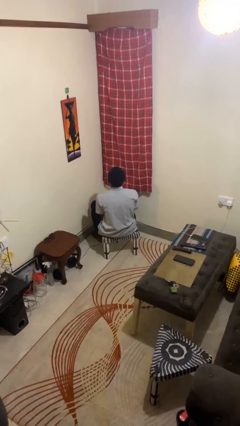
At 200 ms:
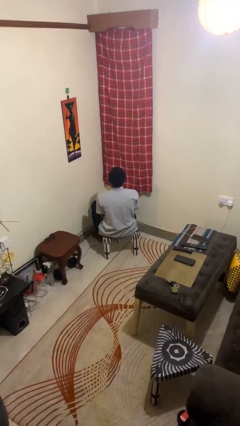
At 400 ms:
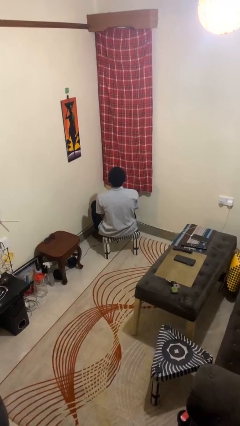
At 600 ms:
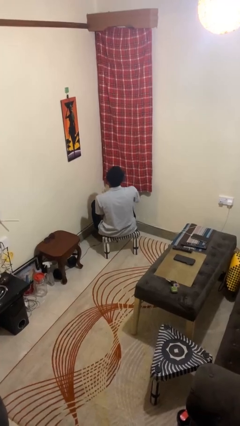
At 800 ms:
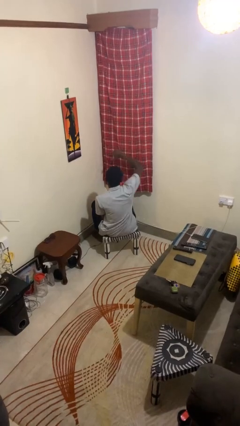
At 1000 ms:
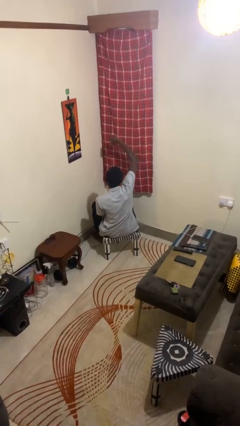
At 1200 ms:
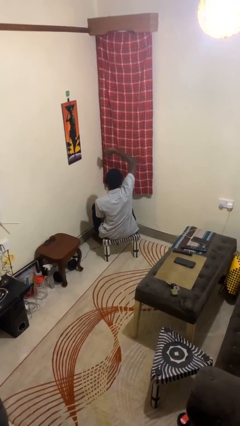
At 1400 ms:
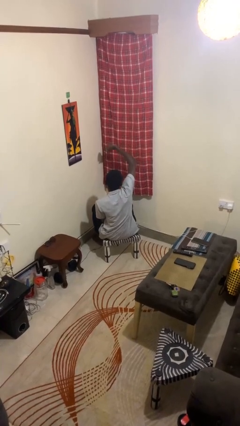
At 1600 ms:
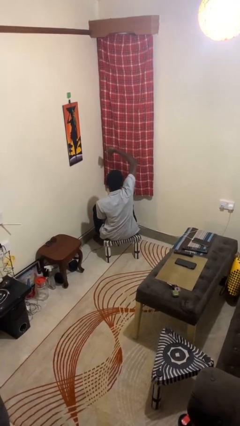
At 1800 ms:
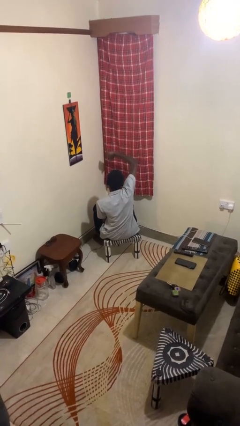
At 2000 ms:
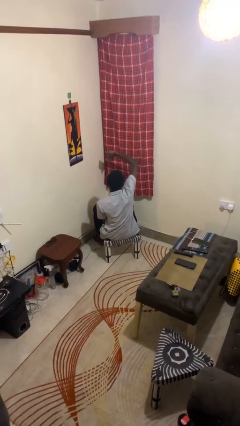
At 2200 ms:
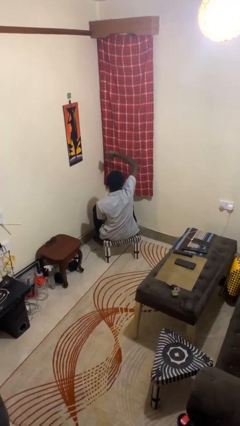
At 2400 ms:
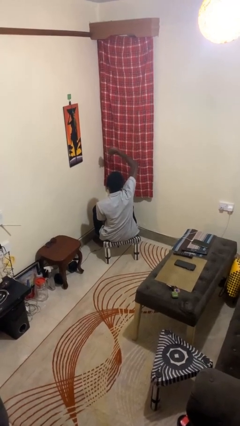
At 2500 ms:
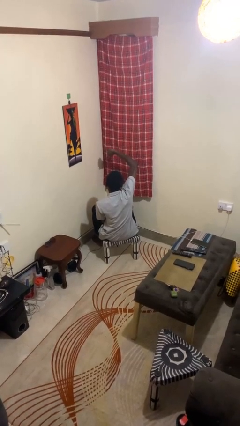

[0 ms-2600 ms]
person gestures thumbs down

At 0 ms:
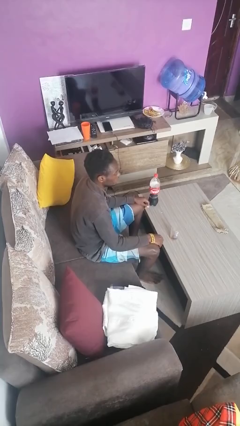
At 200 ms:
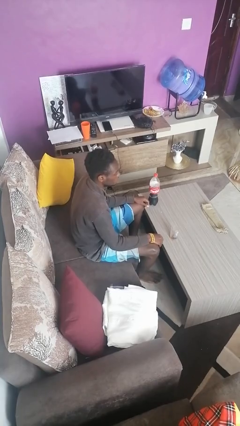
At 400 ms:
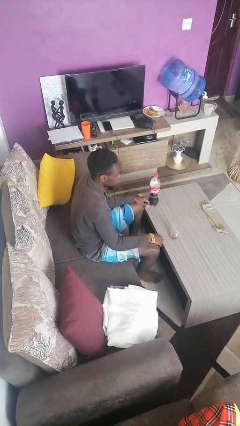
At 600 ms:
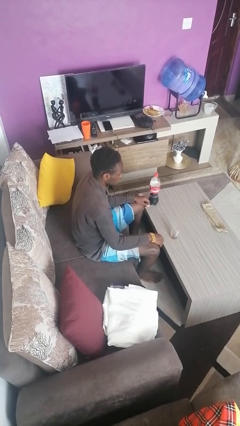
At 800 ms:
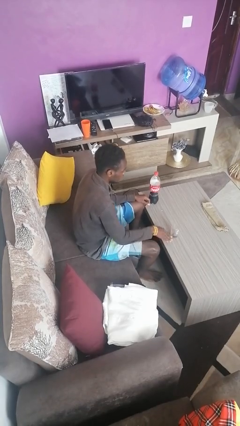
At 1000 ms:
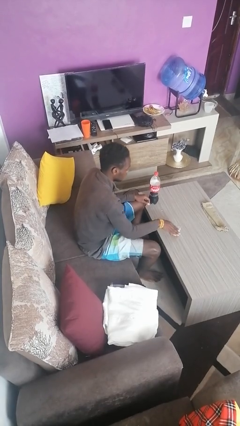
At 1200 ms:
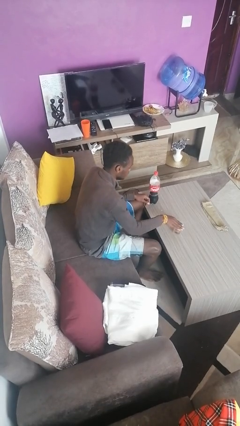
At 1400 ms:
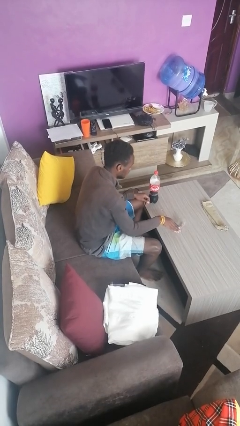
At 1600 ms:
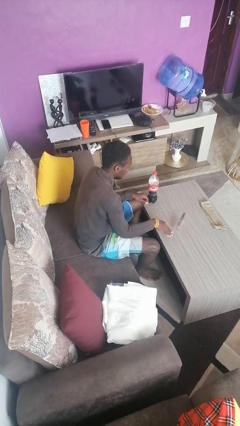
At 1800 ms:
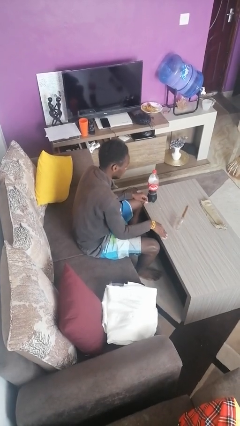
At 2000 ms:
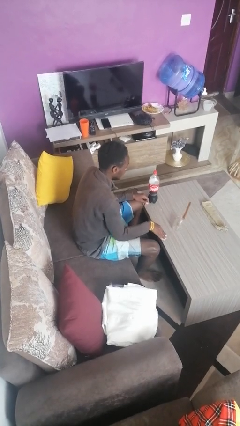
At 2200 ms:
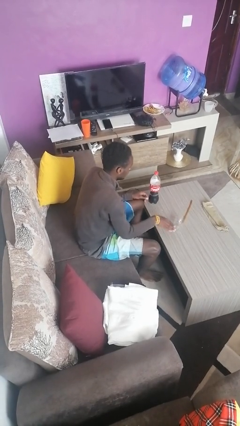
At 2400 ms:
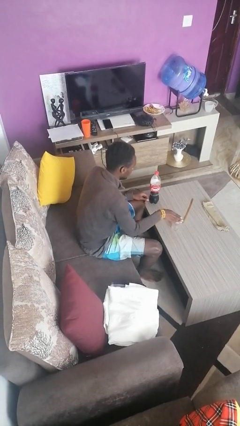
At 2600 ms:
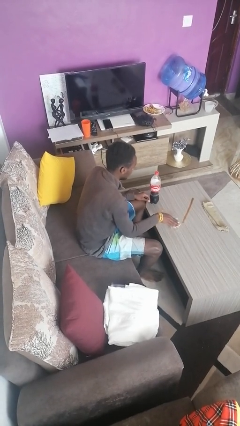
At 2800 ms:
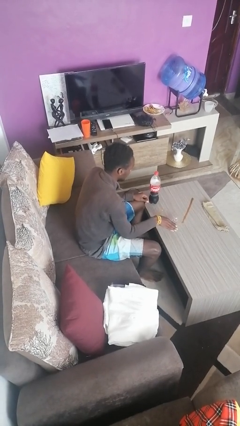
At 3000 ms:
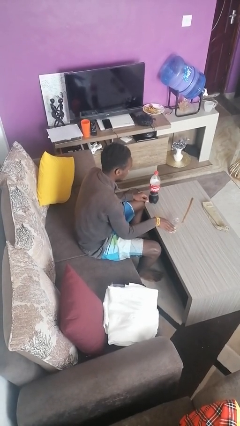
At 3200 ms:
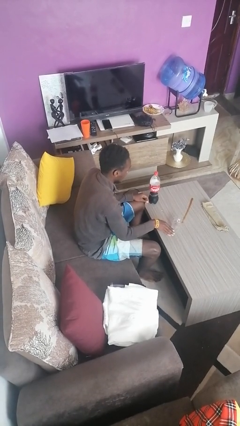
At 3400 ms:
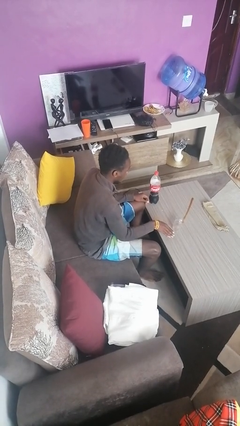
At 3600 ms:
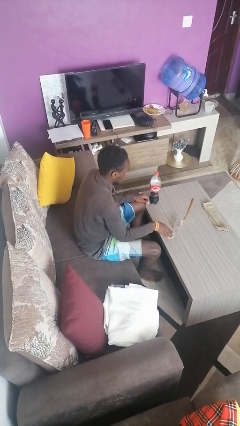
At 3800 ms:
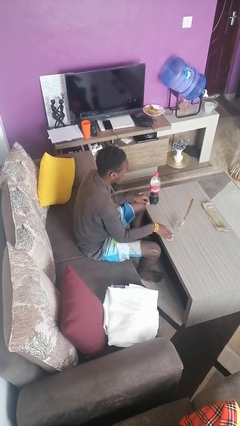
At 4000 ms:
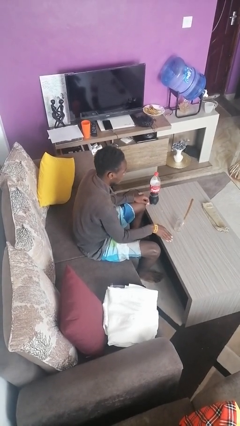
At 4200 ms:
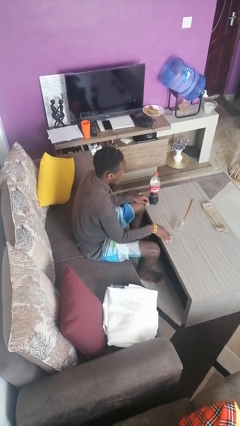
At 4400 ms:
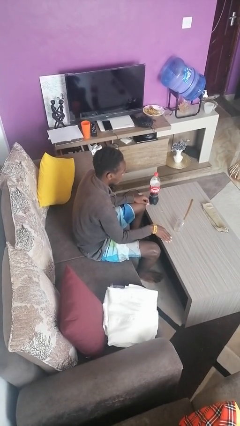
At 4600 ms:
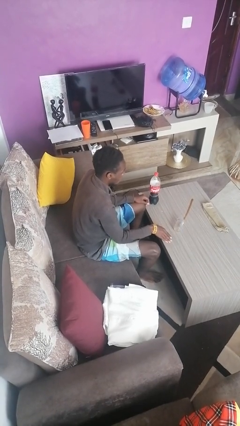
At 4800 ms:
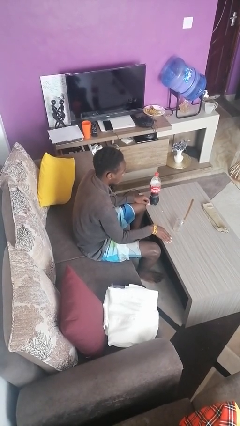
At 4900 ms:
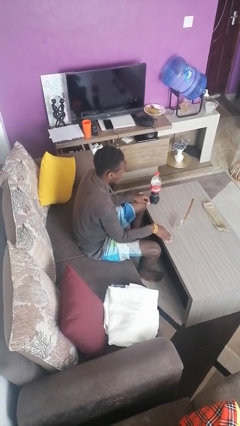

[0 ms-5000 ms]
person spills on table

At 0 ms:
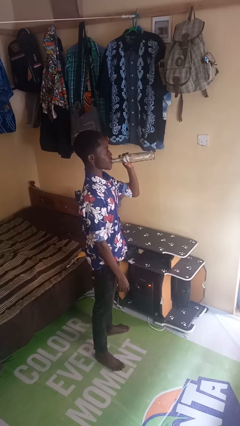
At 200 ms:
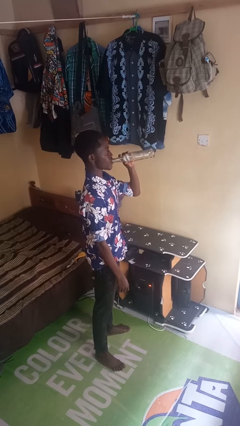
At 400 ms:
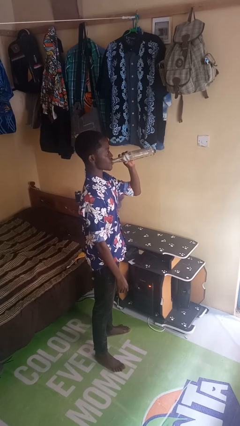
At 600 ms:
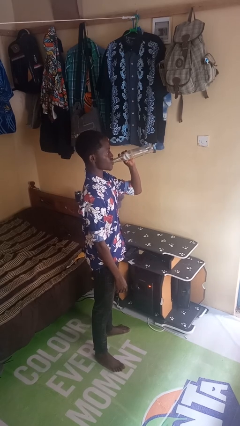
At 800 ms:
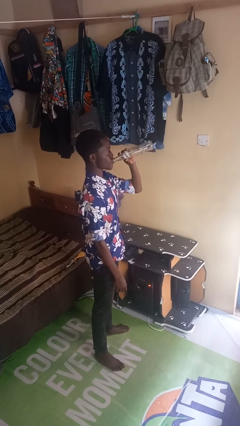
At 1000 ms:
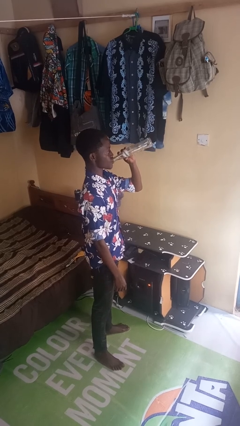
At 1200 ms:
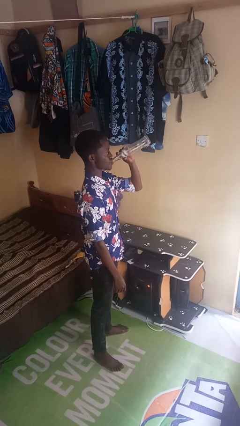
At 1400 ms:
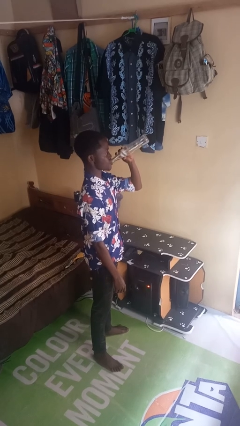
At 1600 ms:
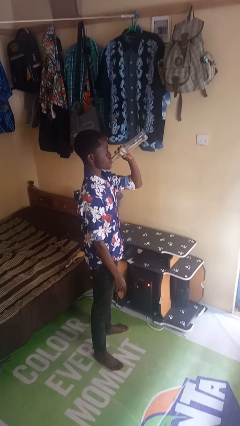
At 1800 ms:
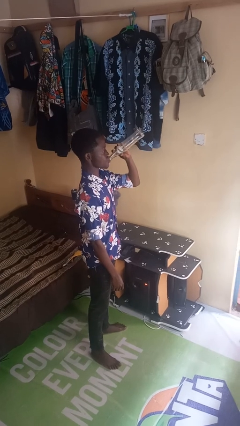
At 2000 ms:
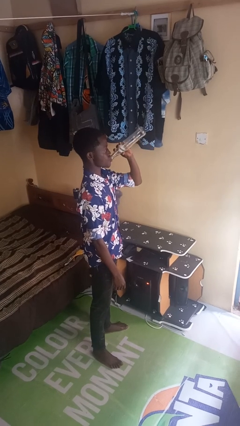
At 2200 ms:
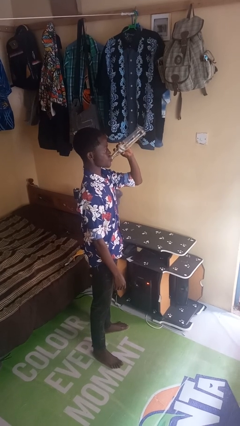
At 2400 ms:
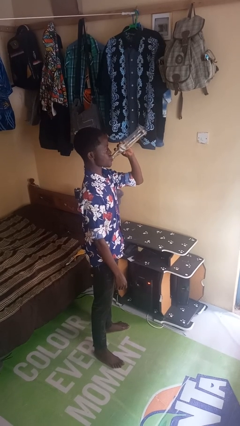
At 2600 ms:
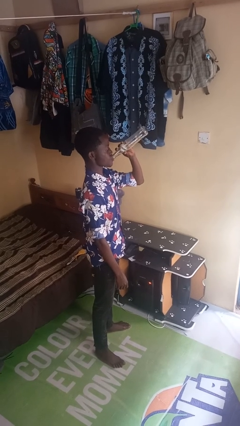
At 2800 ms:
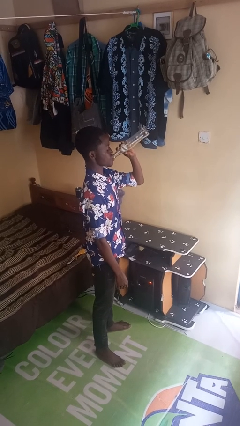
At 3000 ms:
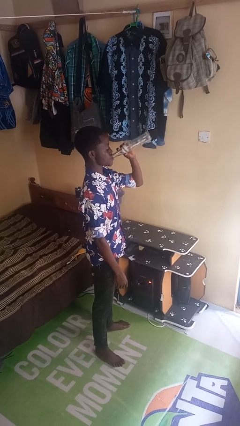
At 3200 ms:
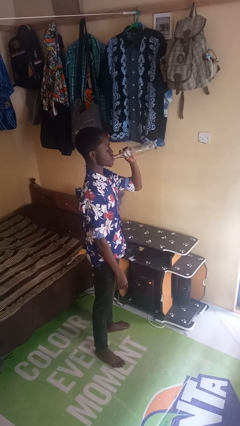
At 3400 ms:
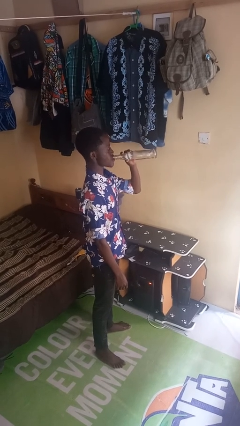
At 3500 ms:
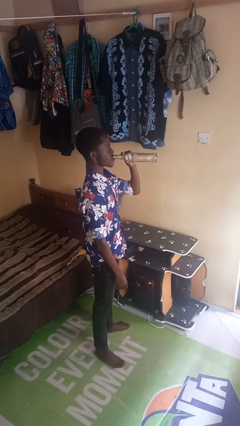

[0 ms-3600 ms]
person drinks from bottle

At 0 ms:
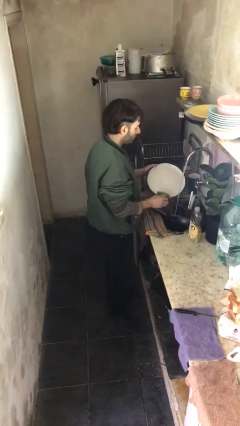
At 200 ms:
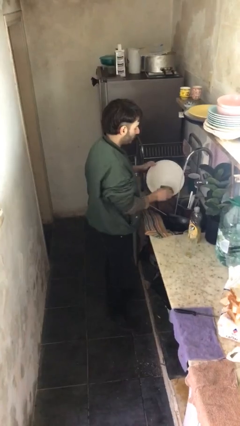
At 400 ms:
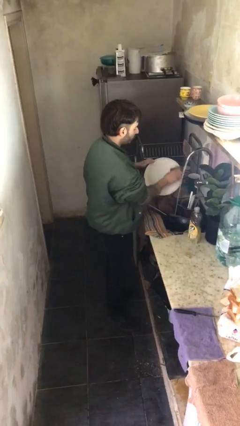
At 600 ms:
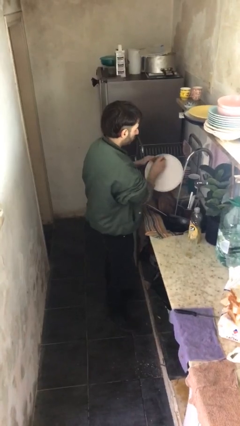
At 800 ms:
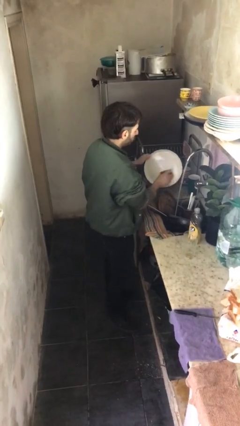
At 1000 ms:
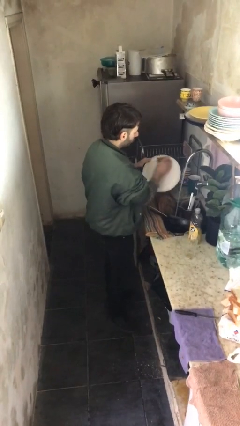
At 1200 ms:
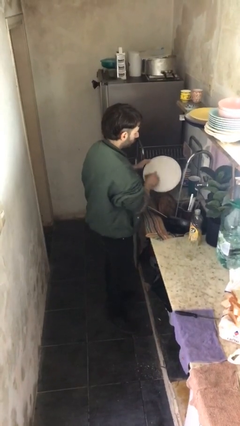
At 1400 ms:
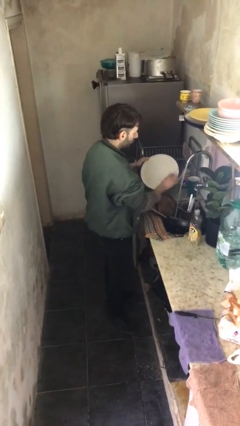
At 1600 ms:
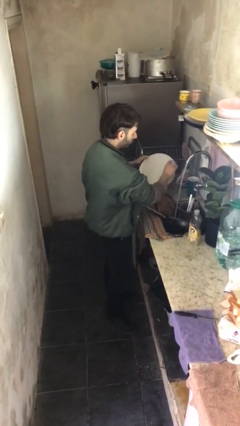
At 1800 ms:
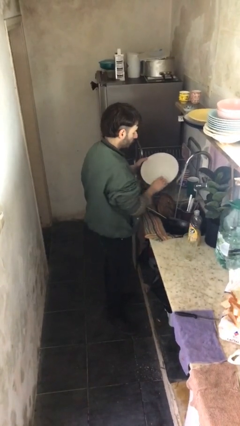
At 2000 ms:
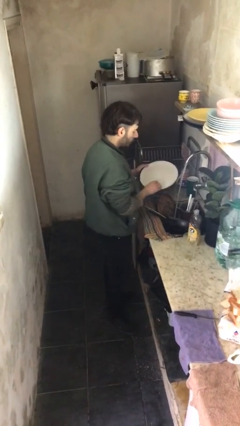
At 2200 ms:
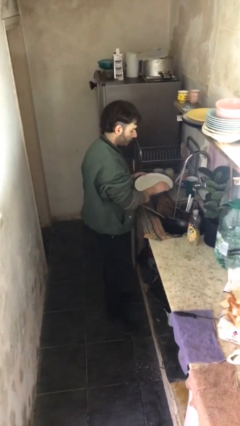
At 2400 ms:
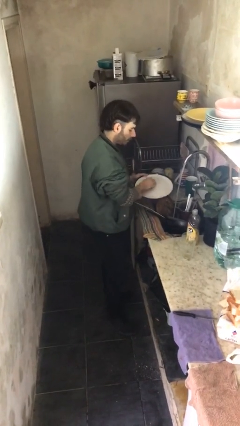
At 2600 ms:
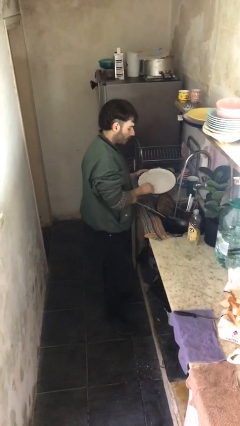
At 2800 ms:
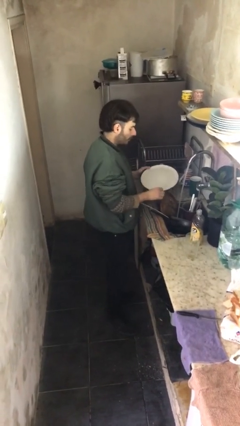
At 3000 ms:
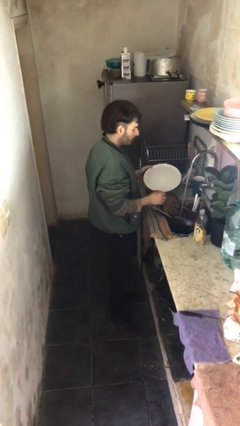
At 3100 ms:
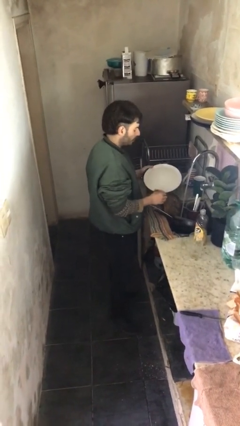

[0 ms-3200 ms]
person washes dish

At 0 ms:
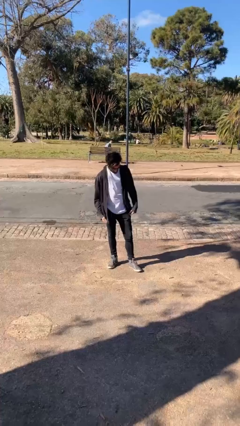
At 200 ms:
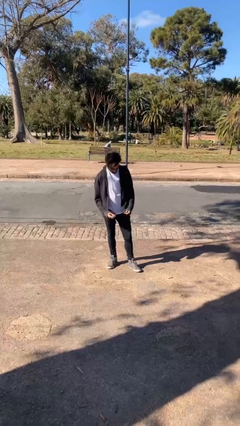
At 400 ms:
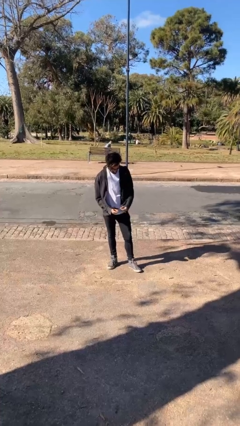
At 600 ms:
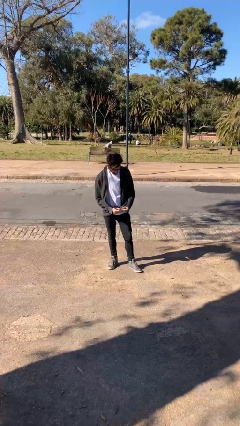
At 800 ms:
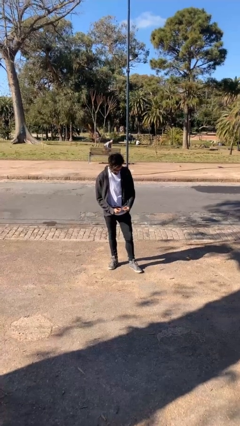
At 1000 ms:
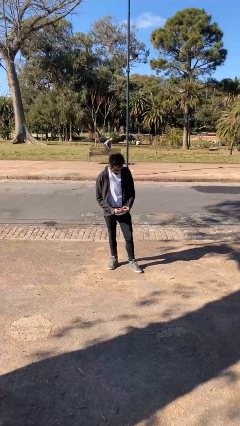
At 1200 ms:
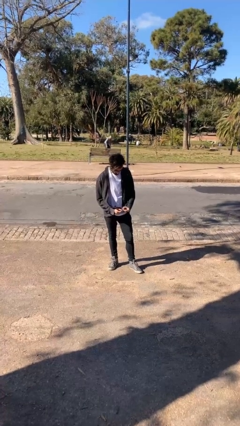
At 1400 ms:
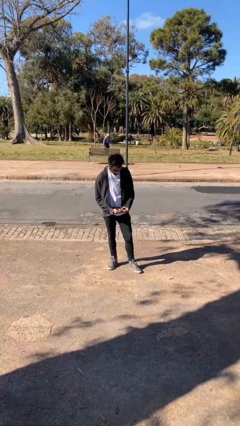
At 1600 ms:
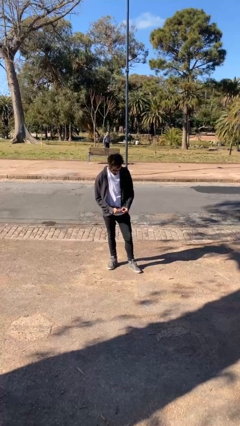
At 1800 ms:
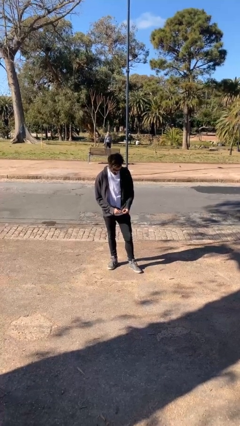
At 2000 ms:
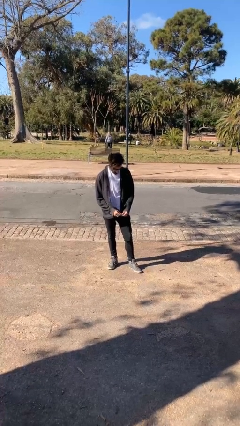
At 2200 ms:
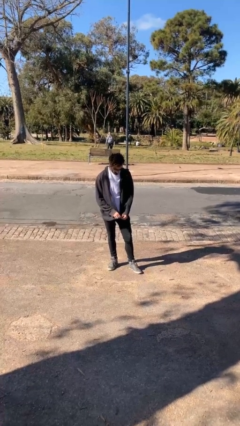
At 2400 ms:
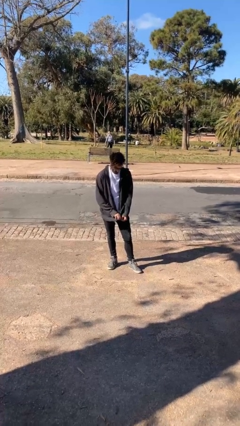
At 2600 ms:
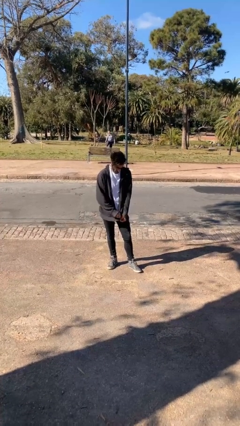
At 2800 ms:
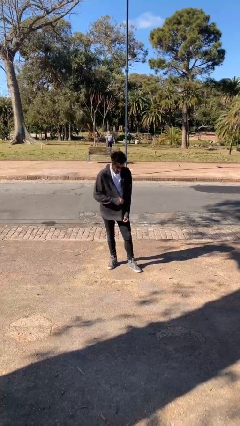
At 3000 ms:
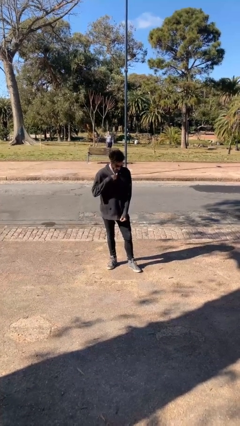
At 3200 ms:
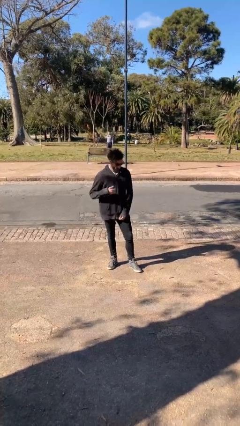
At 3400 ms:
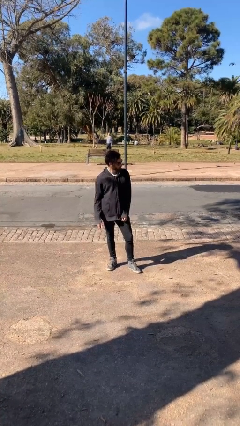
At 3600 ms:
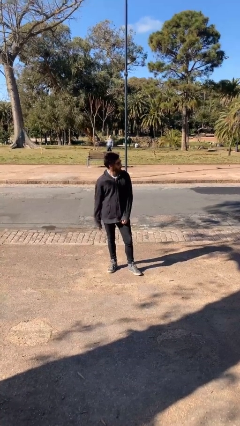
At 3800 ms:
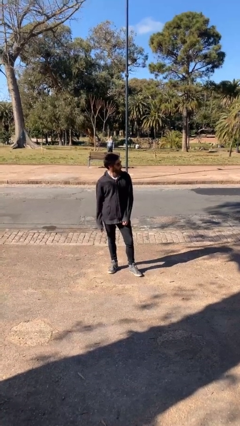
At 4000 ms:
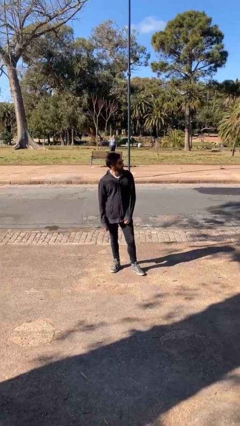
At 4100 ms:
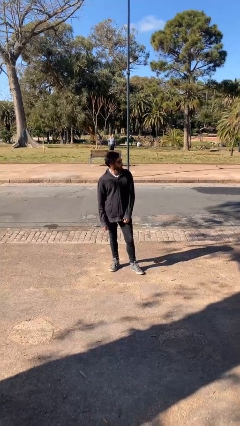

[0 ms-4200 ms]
person zips up jacket